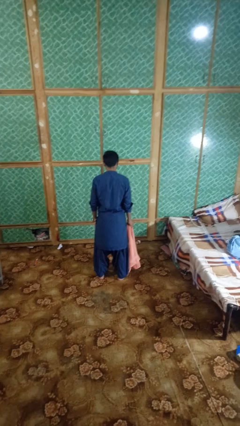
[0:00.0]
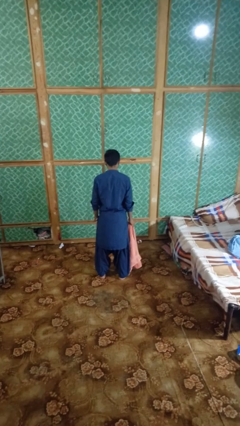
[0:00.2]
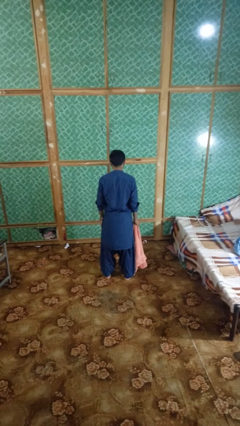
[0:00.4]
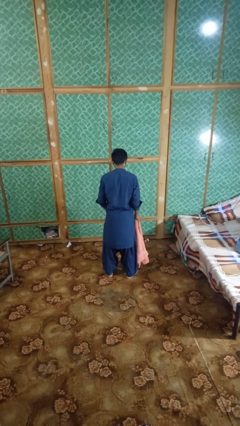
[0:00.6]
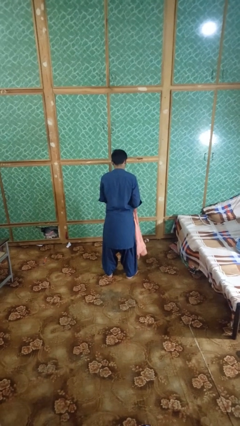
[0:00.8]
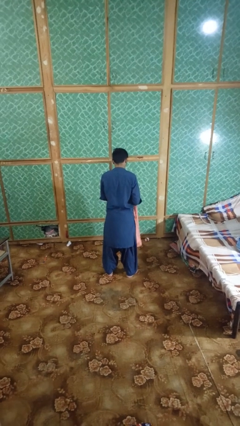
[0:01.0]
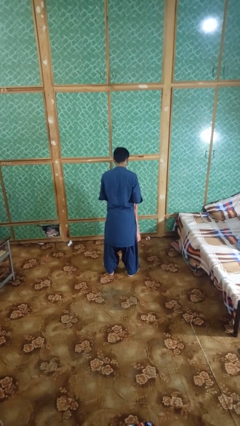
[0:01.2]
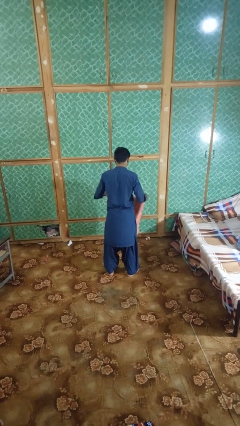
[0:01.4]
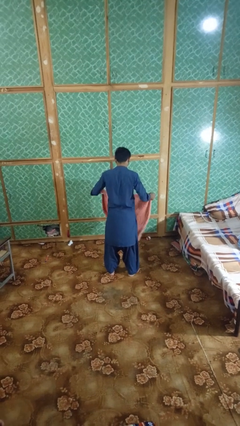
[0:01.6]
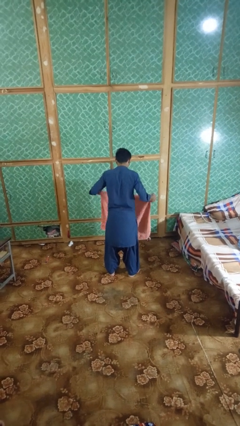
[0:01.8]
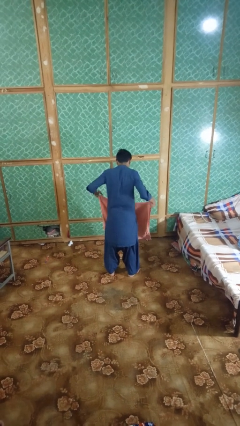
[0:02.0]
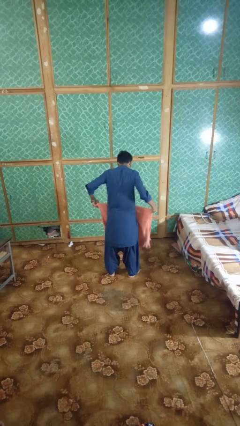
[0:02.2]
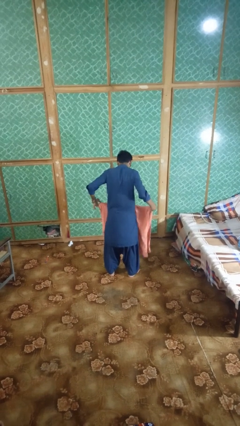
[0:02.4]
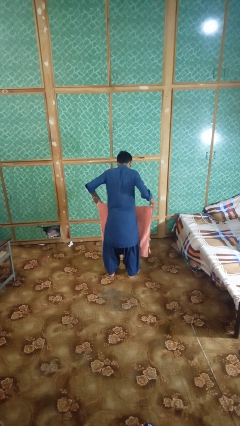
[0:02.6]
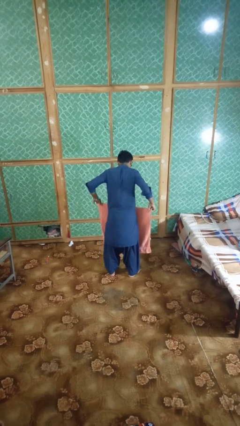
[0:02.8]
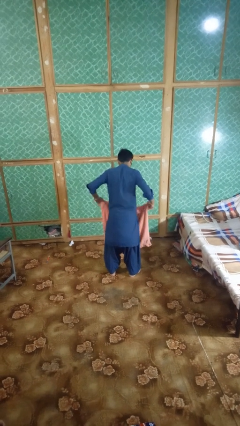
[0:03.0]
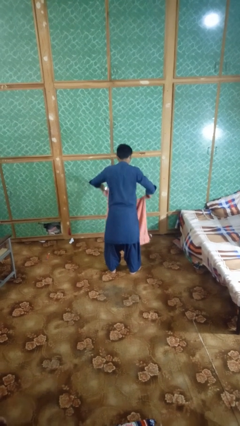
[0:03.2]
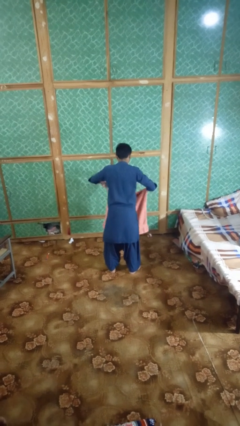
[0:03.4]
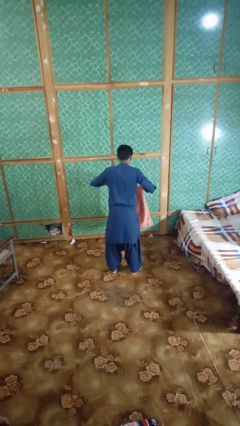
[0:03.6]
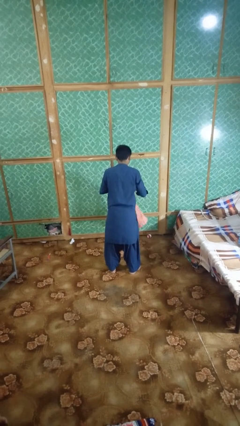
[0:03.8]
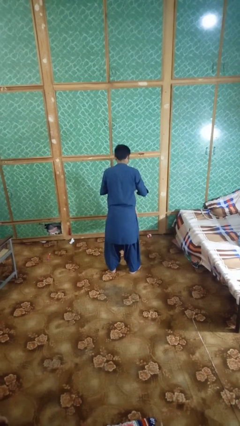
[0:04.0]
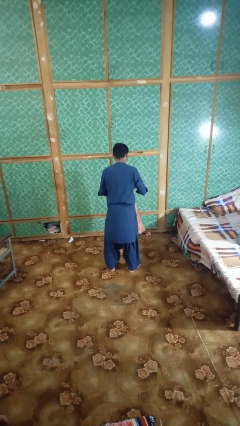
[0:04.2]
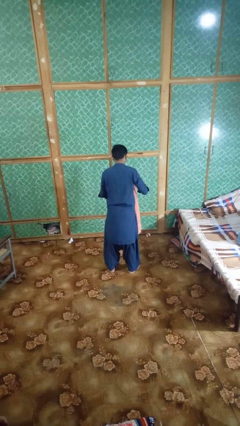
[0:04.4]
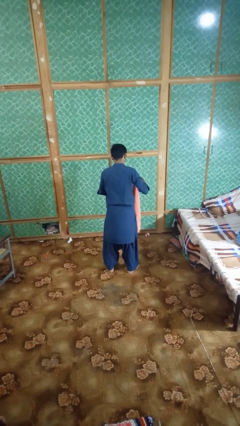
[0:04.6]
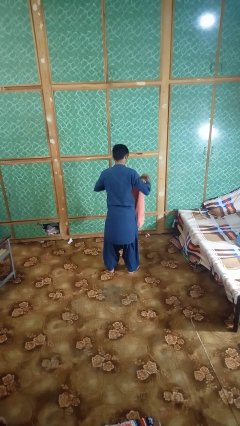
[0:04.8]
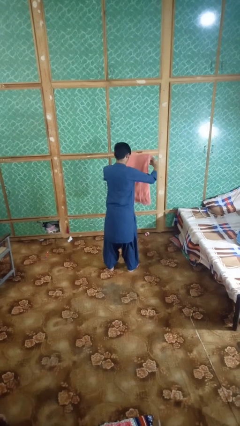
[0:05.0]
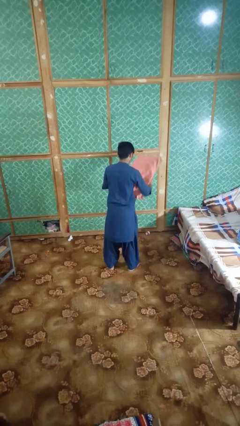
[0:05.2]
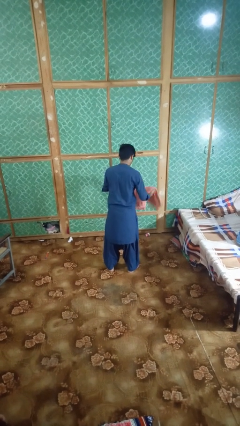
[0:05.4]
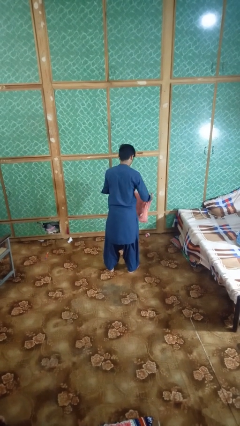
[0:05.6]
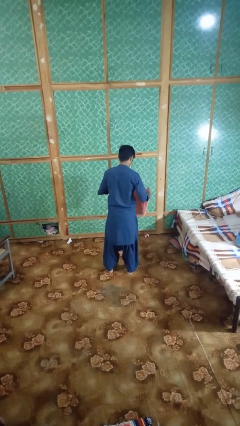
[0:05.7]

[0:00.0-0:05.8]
person folds towel

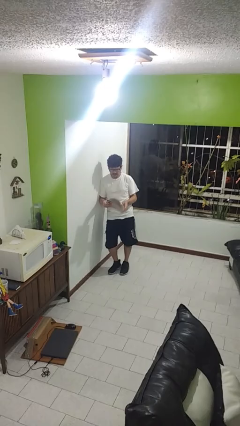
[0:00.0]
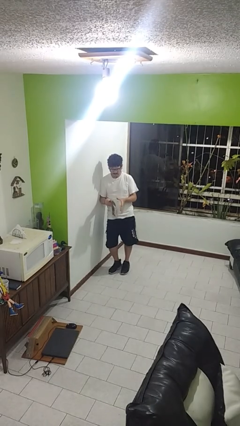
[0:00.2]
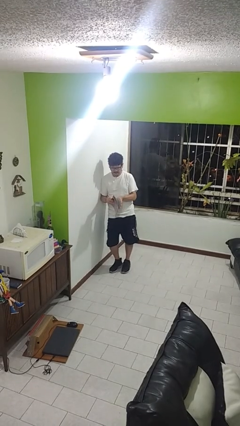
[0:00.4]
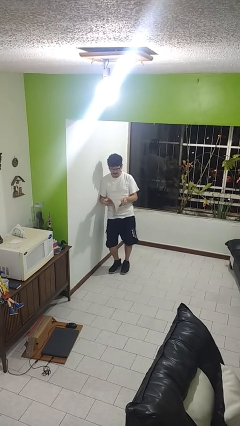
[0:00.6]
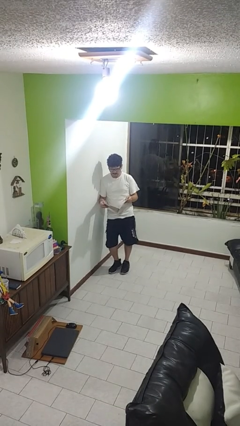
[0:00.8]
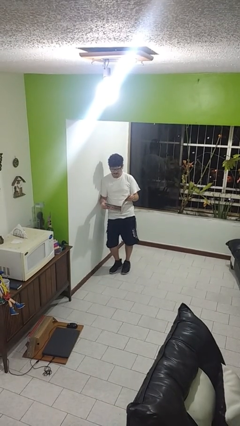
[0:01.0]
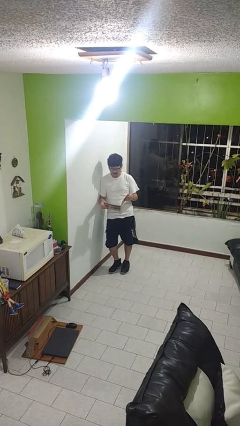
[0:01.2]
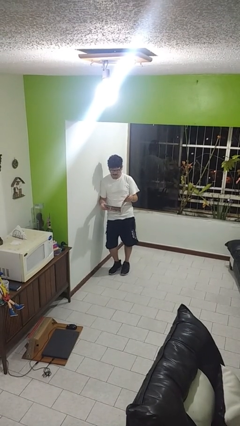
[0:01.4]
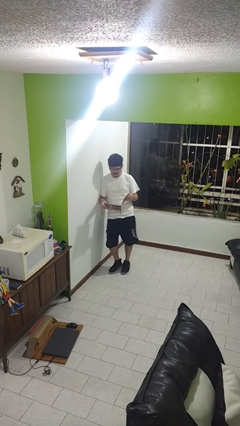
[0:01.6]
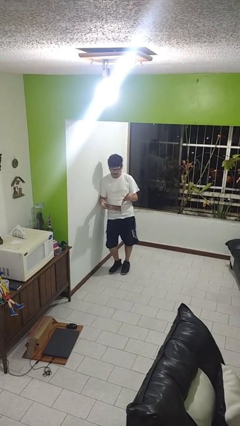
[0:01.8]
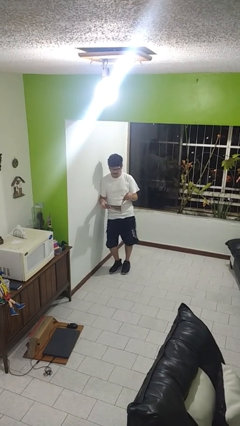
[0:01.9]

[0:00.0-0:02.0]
person reads magazine

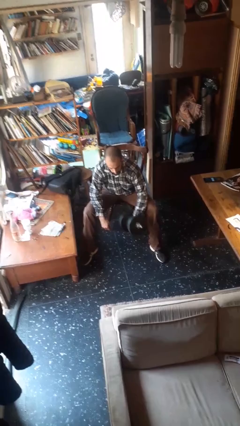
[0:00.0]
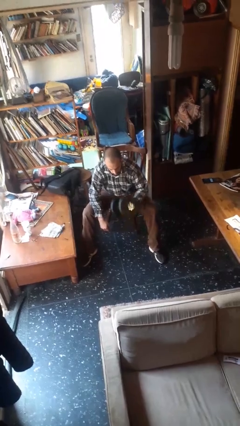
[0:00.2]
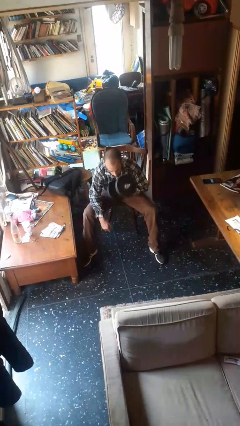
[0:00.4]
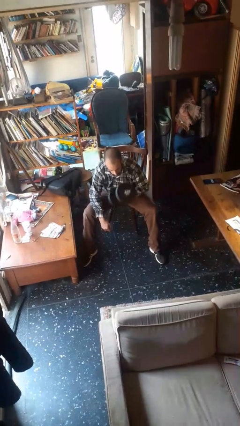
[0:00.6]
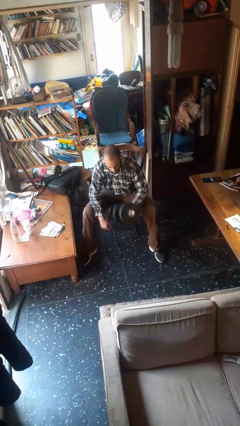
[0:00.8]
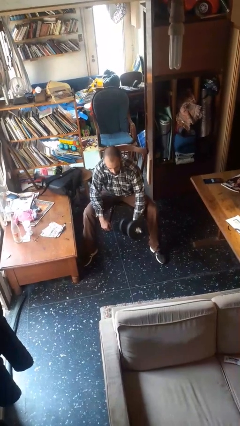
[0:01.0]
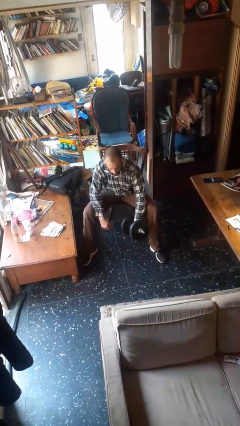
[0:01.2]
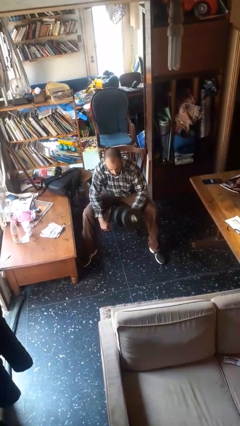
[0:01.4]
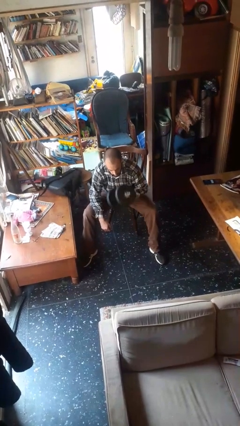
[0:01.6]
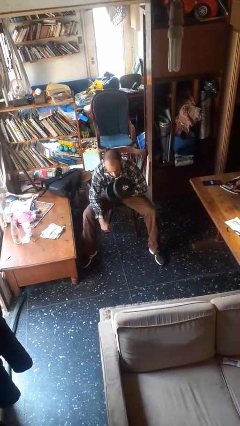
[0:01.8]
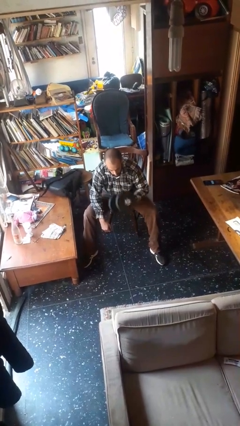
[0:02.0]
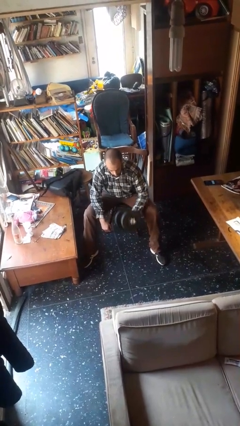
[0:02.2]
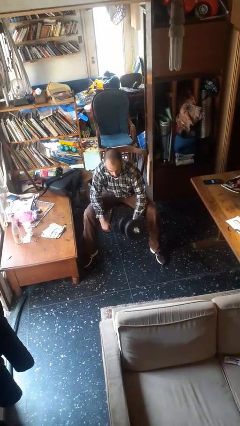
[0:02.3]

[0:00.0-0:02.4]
person lifts dumbbells

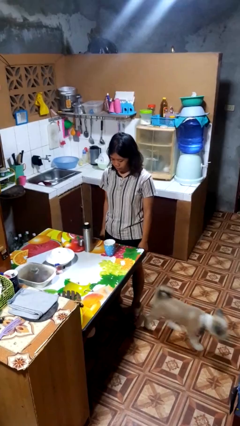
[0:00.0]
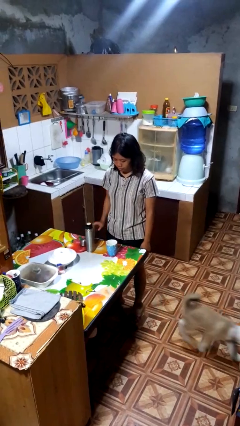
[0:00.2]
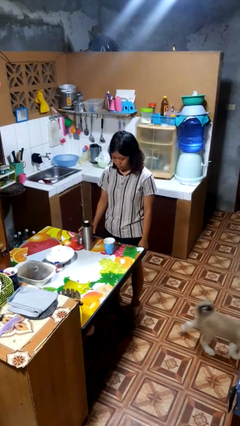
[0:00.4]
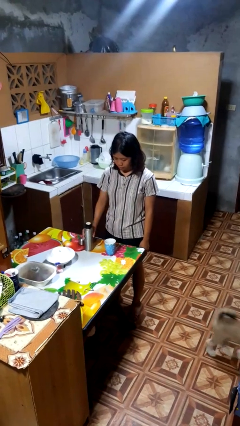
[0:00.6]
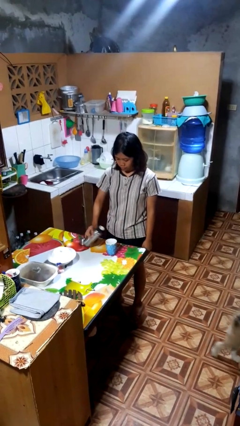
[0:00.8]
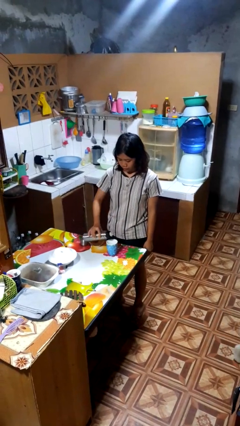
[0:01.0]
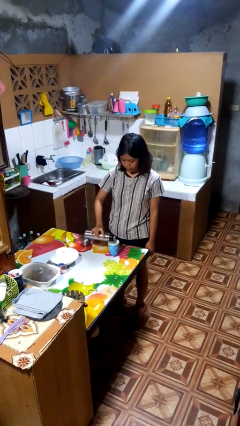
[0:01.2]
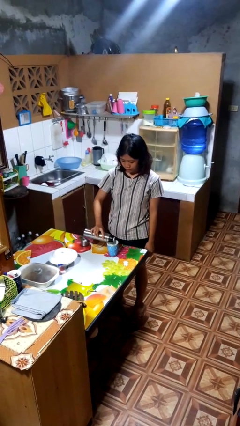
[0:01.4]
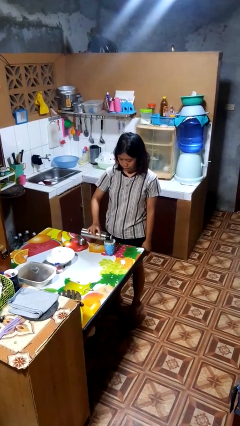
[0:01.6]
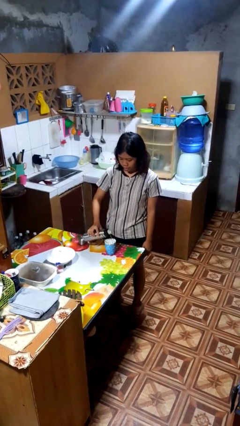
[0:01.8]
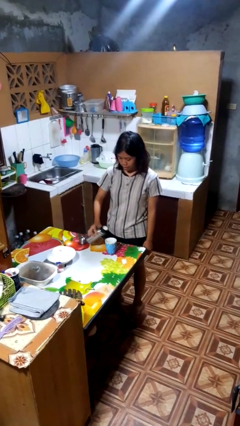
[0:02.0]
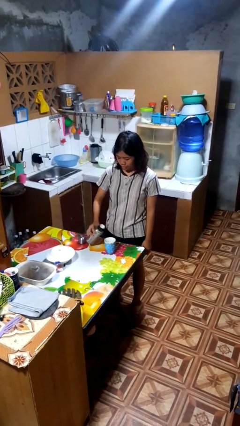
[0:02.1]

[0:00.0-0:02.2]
person pours coffee into mug

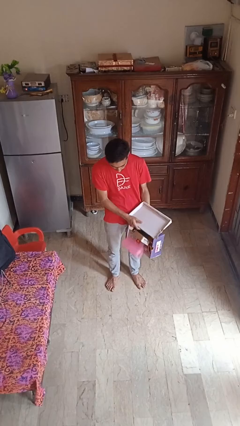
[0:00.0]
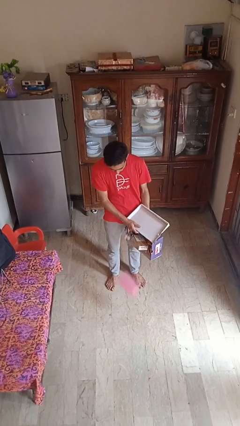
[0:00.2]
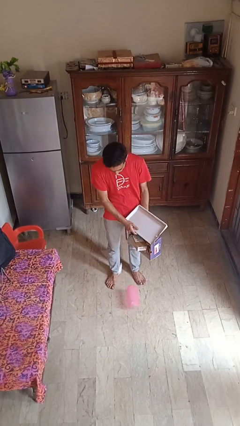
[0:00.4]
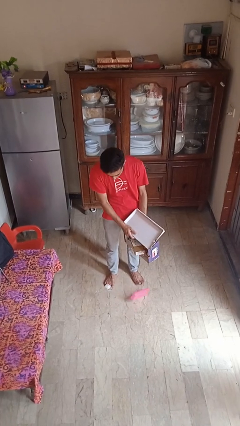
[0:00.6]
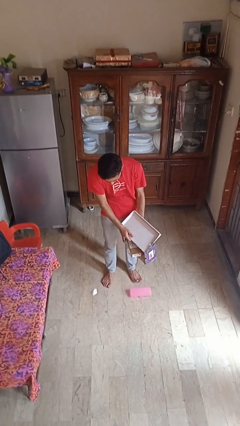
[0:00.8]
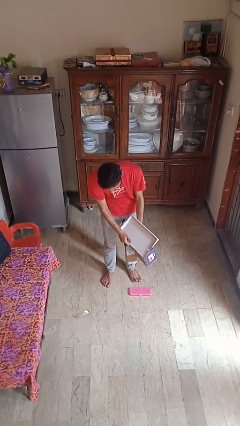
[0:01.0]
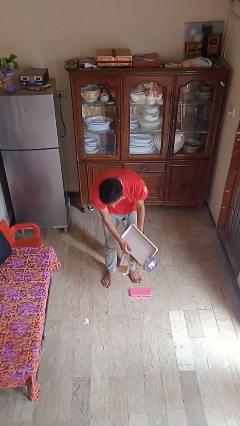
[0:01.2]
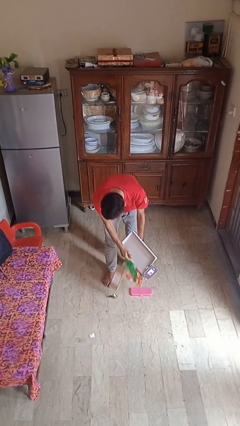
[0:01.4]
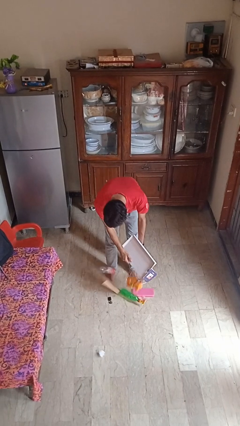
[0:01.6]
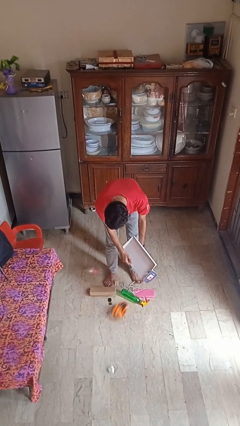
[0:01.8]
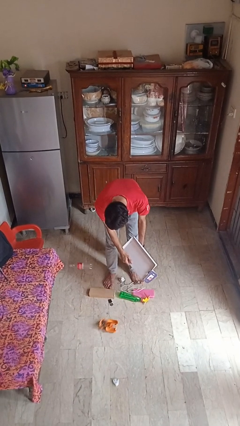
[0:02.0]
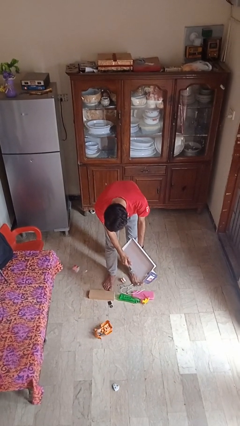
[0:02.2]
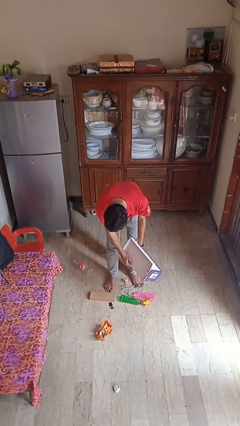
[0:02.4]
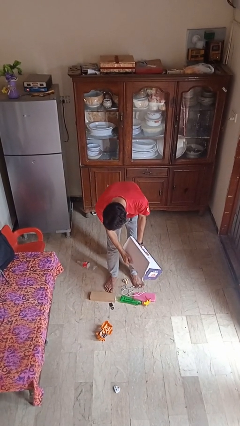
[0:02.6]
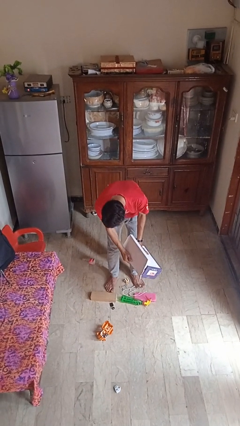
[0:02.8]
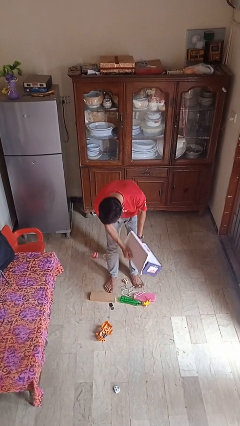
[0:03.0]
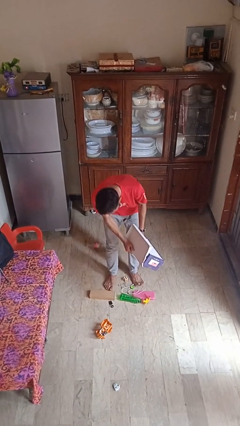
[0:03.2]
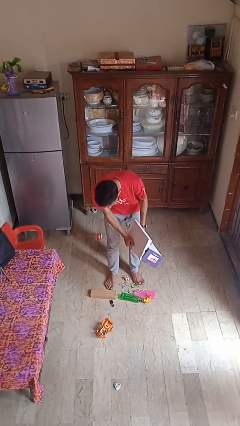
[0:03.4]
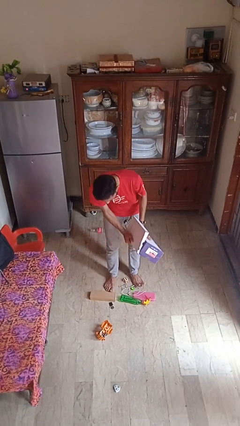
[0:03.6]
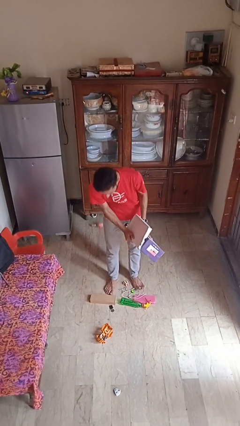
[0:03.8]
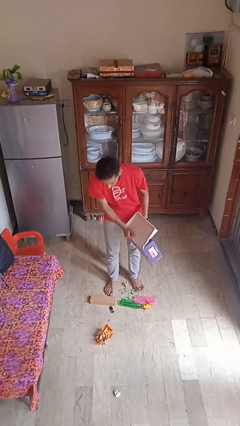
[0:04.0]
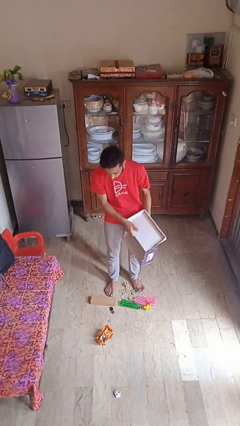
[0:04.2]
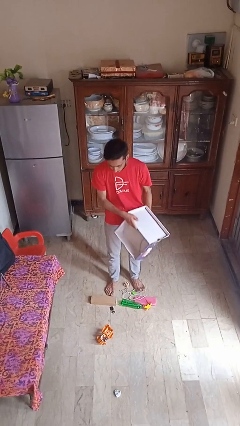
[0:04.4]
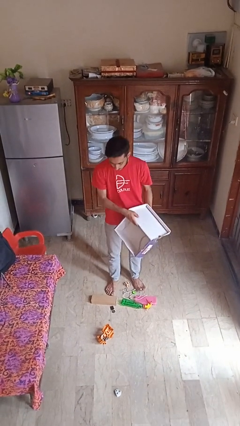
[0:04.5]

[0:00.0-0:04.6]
person unloads box onto floor

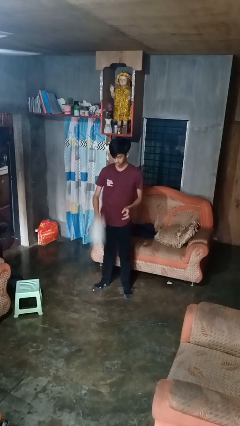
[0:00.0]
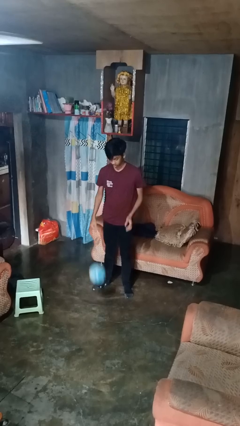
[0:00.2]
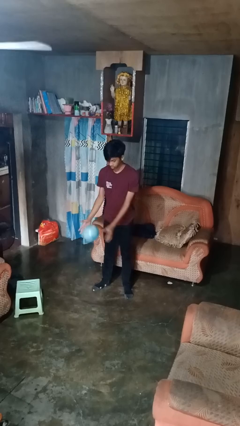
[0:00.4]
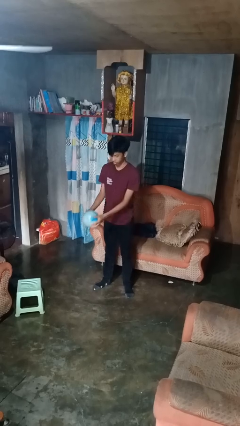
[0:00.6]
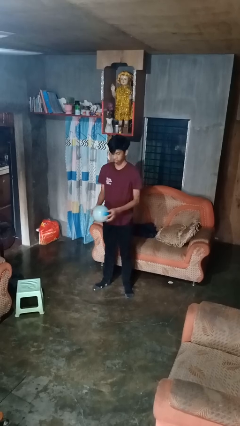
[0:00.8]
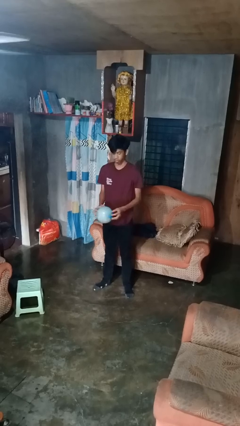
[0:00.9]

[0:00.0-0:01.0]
person bounces ball on floor
